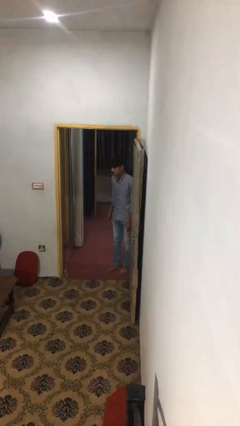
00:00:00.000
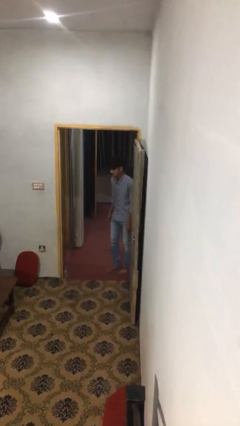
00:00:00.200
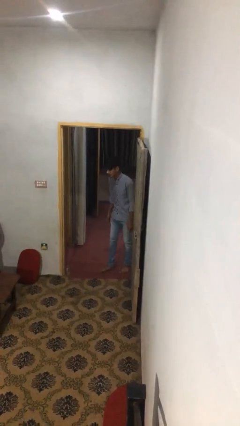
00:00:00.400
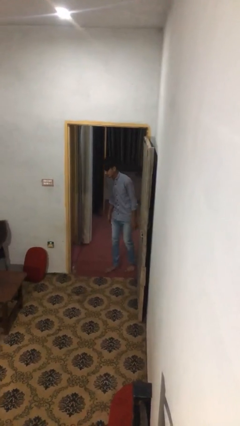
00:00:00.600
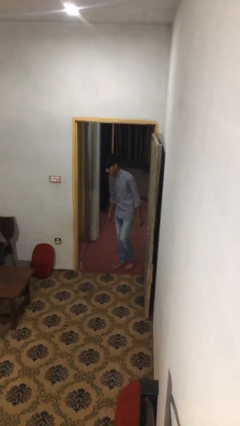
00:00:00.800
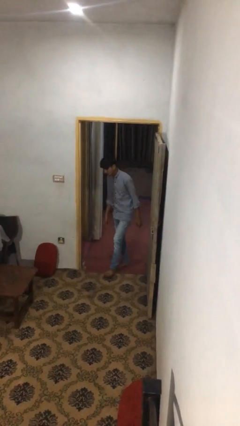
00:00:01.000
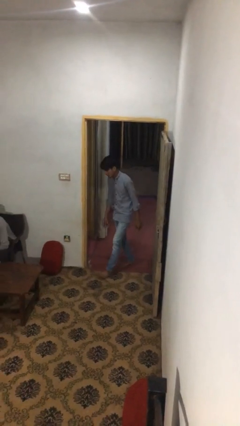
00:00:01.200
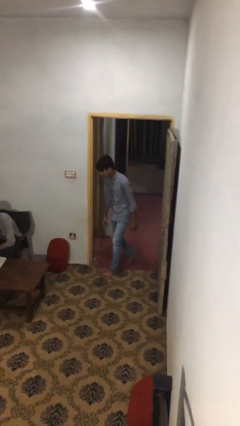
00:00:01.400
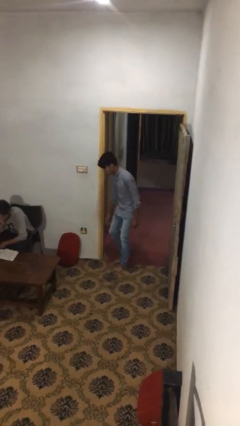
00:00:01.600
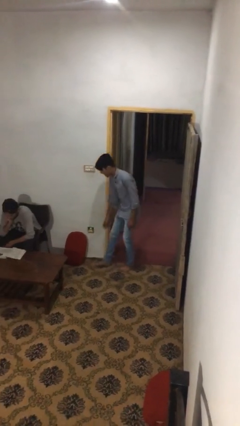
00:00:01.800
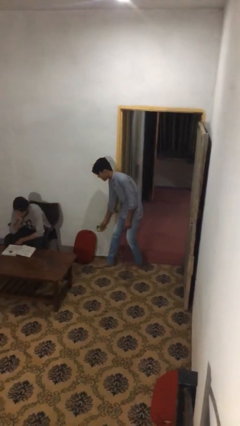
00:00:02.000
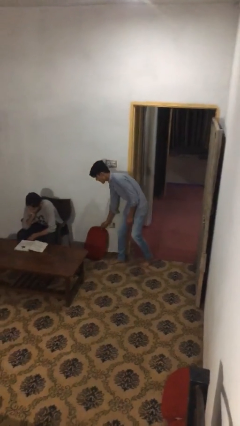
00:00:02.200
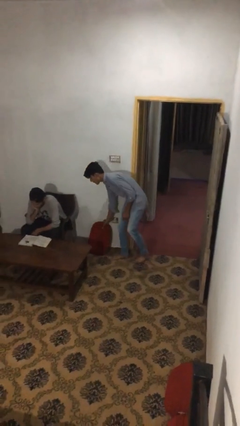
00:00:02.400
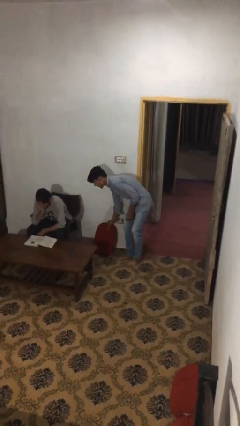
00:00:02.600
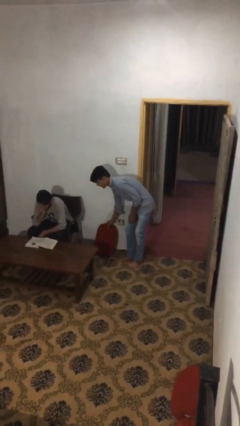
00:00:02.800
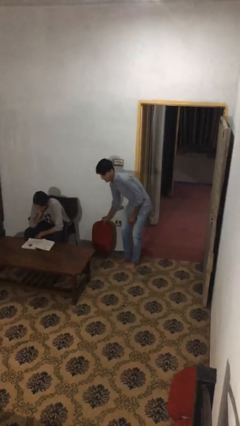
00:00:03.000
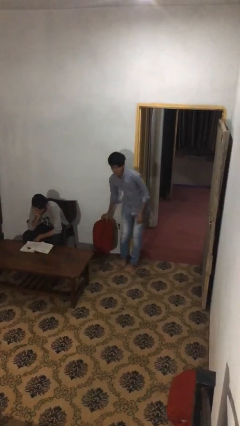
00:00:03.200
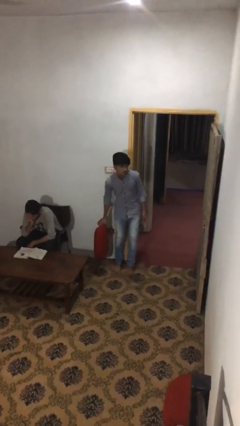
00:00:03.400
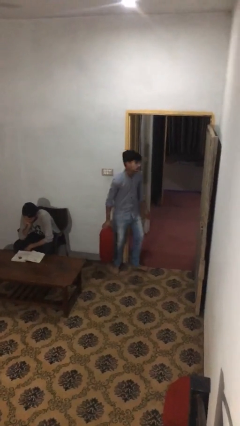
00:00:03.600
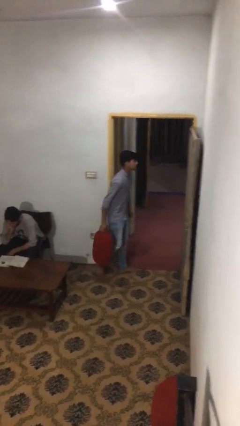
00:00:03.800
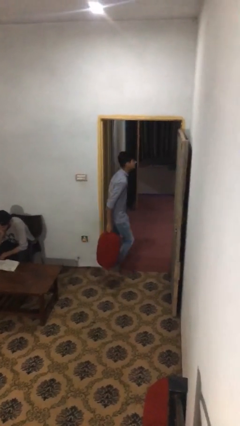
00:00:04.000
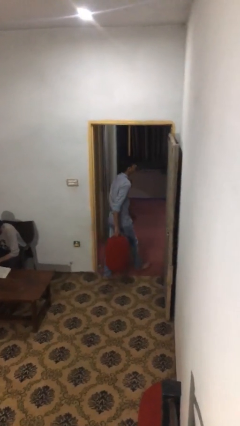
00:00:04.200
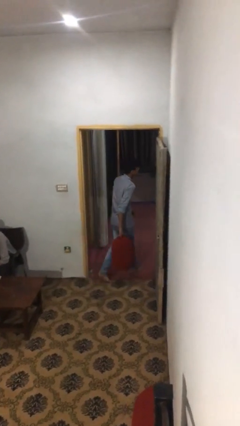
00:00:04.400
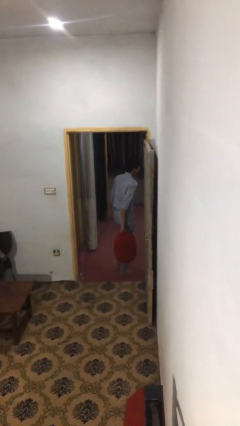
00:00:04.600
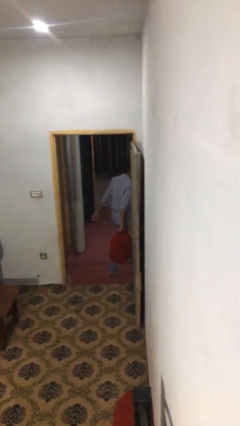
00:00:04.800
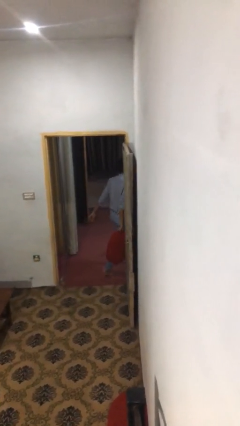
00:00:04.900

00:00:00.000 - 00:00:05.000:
person steals object from person

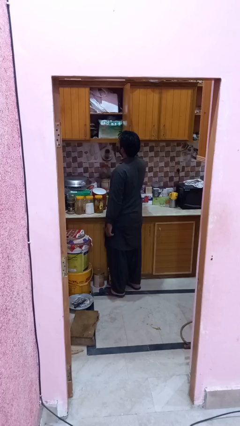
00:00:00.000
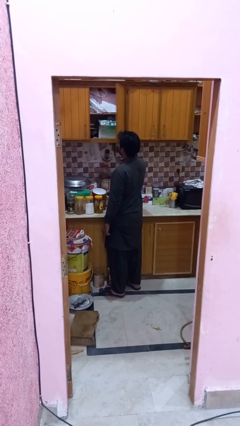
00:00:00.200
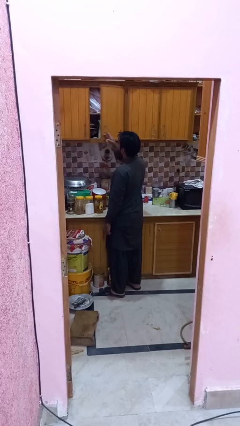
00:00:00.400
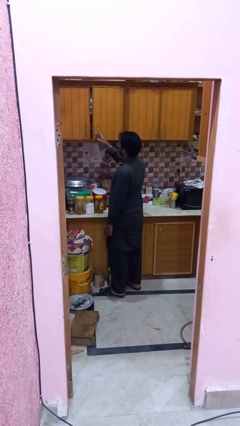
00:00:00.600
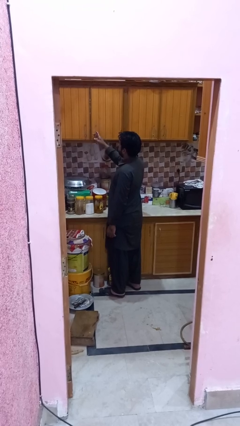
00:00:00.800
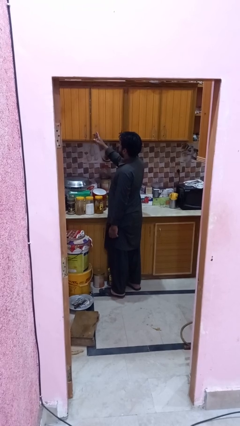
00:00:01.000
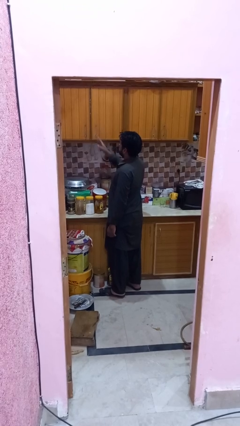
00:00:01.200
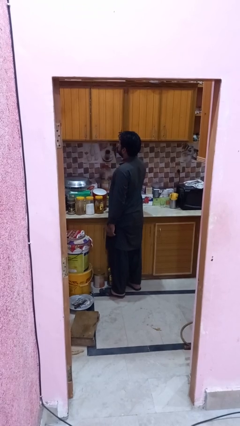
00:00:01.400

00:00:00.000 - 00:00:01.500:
person closes cabinet

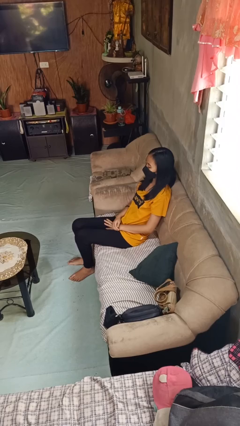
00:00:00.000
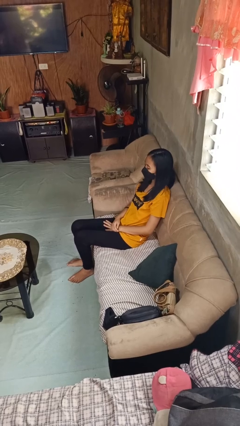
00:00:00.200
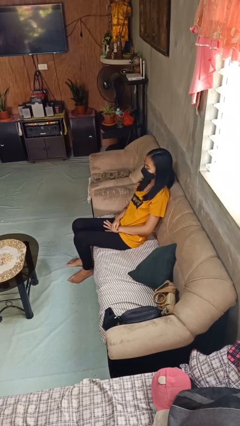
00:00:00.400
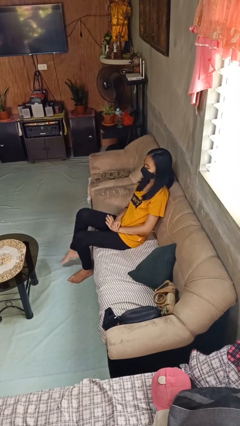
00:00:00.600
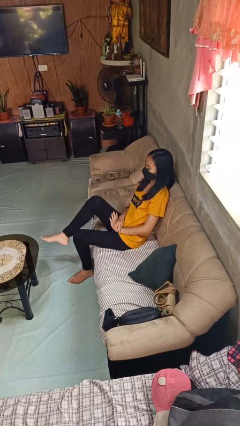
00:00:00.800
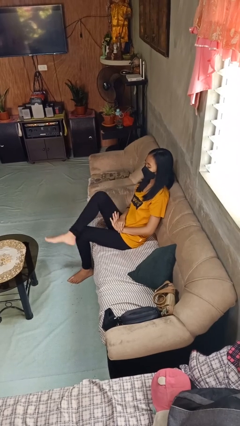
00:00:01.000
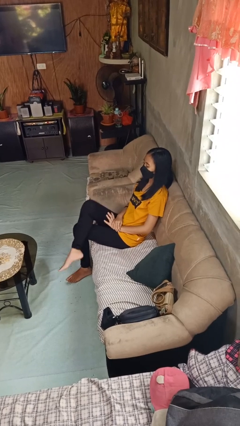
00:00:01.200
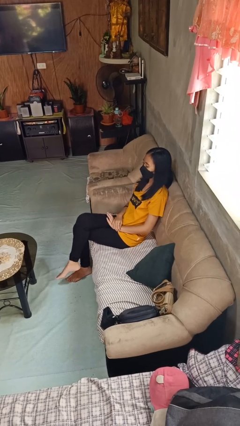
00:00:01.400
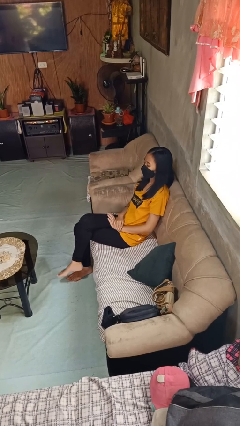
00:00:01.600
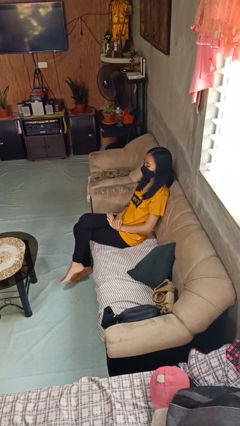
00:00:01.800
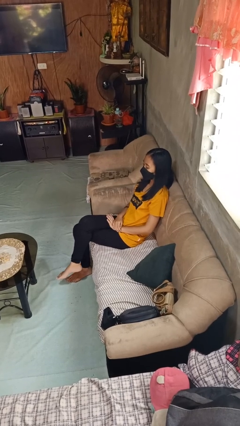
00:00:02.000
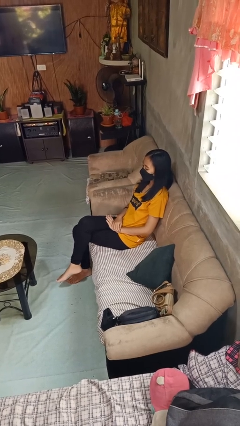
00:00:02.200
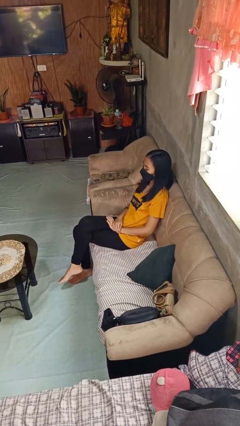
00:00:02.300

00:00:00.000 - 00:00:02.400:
person crosses legs

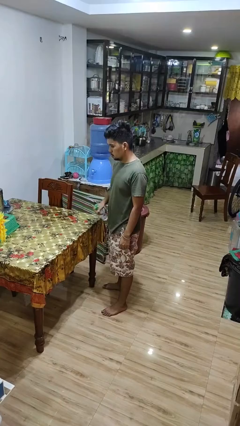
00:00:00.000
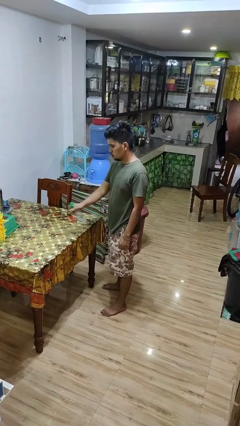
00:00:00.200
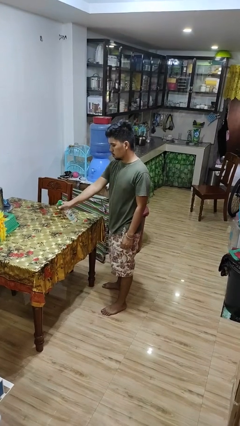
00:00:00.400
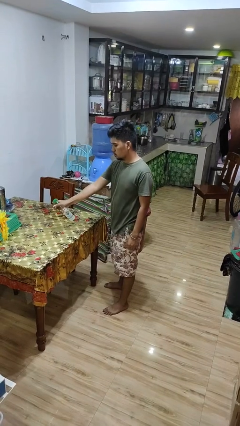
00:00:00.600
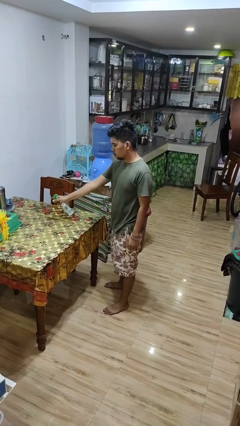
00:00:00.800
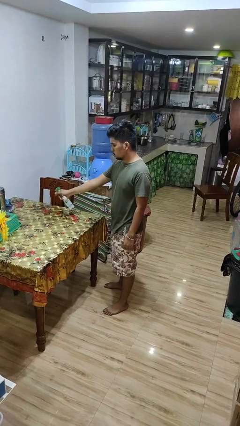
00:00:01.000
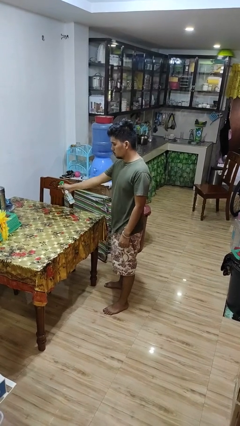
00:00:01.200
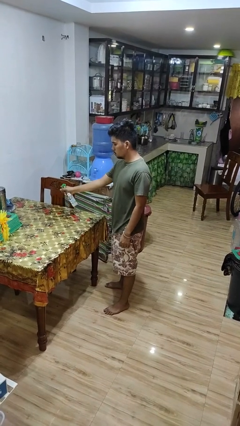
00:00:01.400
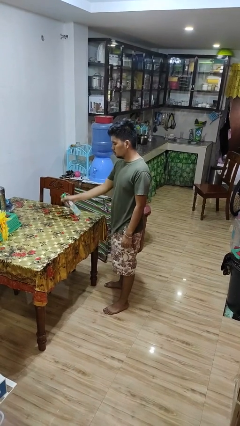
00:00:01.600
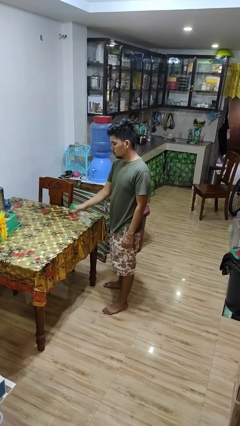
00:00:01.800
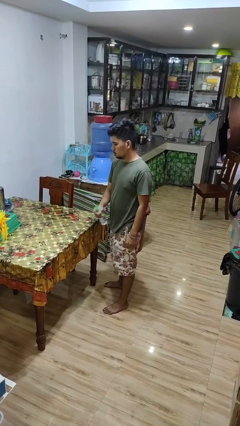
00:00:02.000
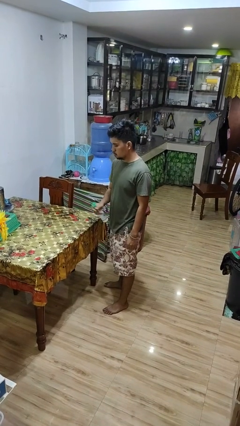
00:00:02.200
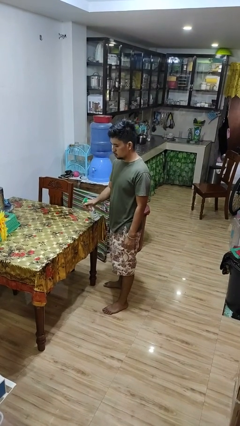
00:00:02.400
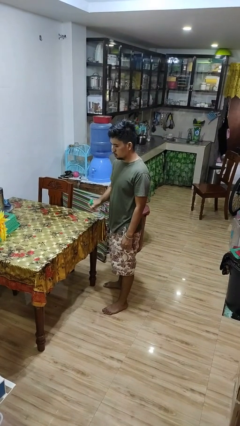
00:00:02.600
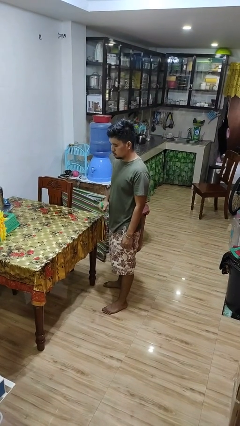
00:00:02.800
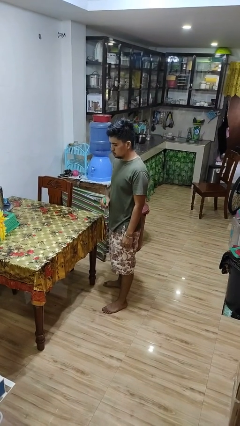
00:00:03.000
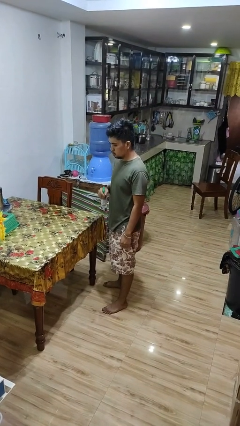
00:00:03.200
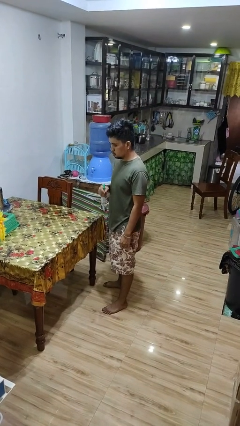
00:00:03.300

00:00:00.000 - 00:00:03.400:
person sprays from bottle

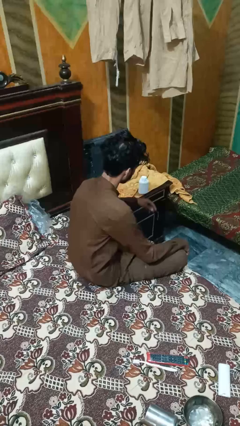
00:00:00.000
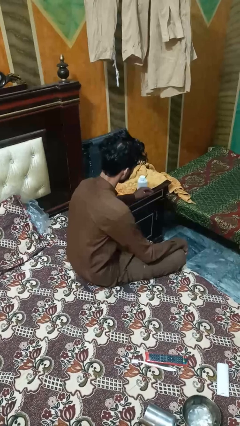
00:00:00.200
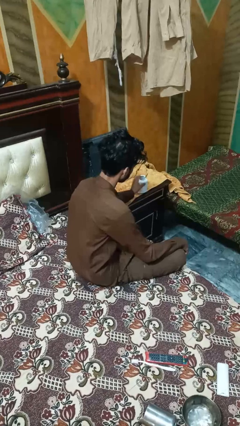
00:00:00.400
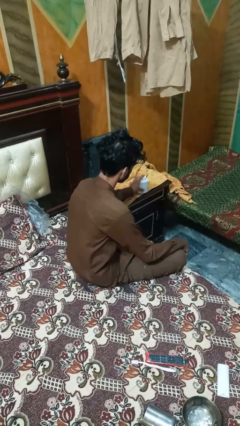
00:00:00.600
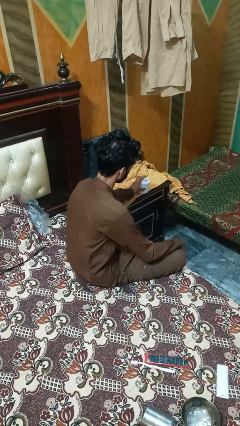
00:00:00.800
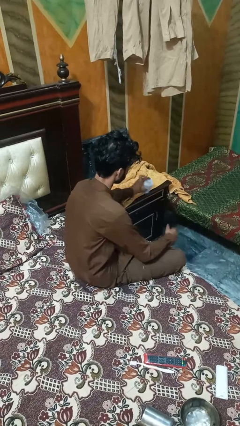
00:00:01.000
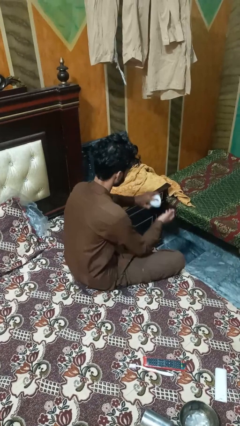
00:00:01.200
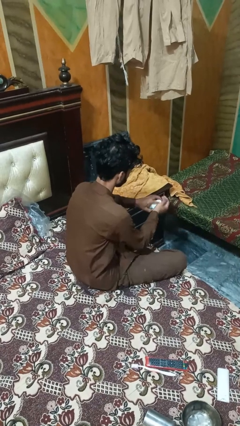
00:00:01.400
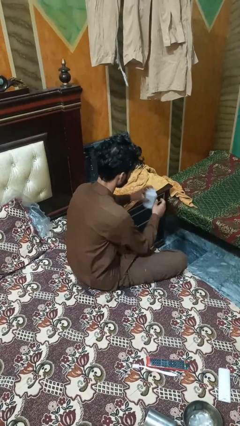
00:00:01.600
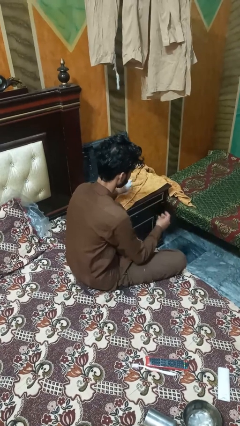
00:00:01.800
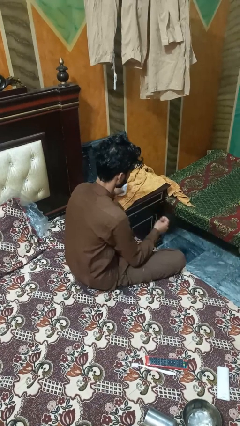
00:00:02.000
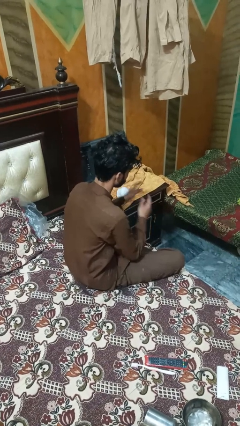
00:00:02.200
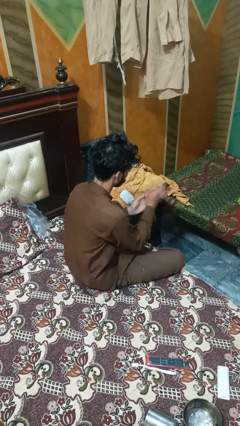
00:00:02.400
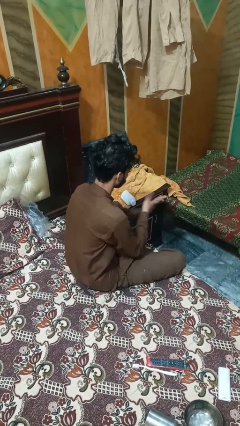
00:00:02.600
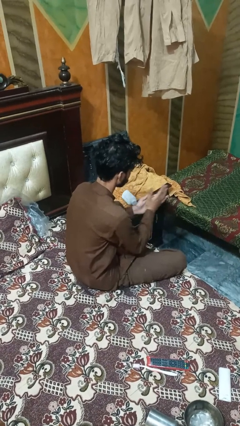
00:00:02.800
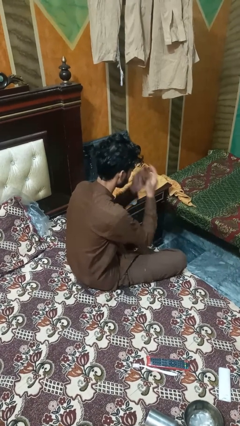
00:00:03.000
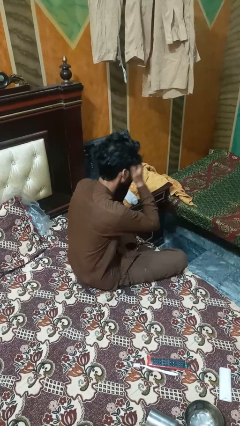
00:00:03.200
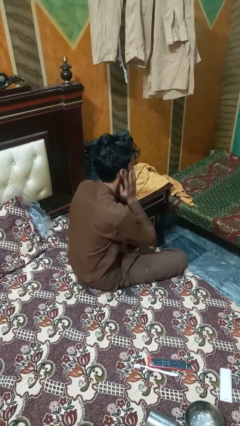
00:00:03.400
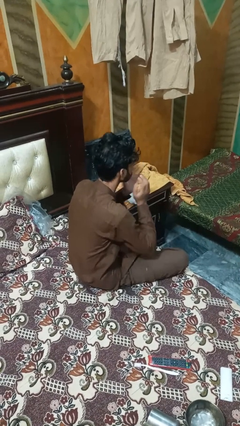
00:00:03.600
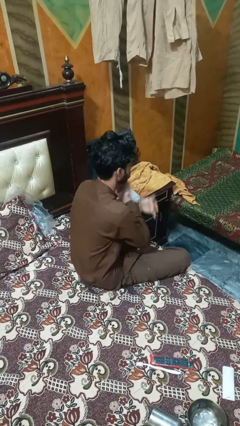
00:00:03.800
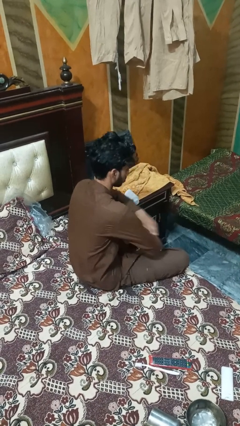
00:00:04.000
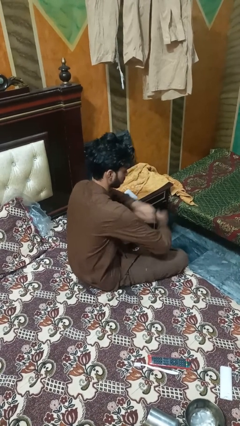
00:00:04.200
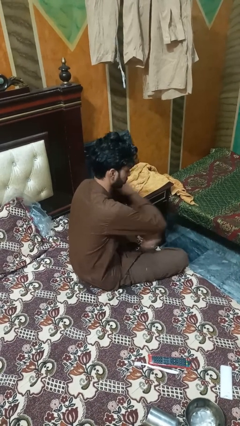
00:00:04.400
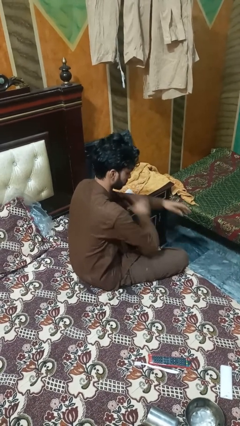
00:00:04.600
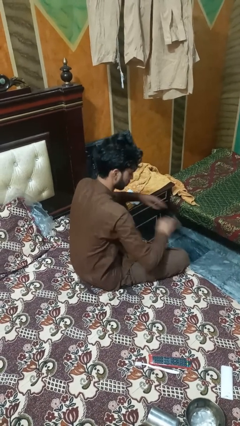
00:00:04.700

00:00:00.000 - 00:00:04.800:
person applies sunscreen

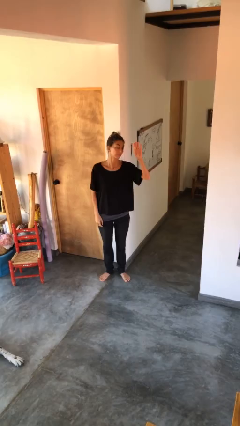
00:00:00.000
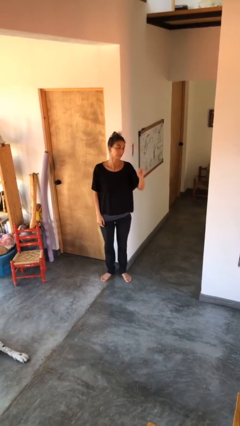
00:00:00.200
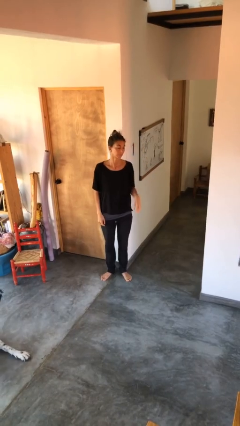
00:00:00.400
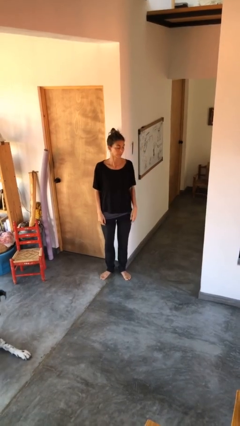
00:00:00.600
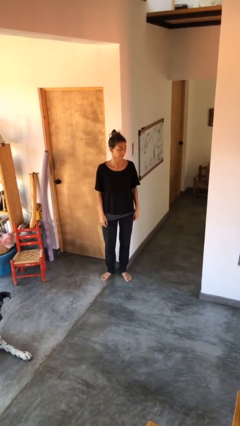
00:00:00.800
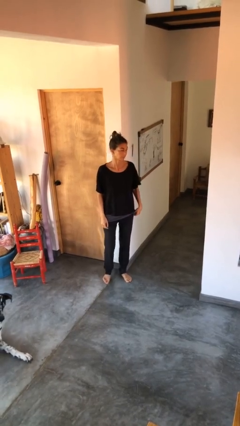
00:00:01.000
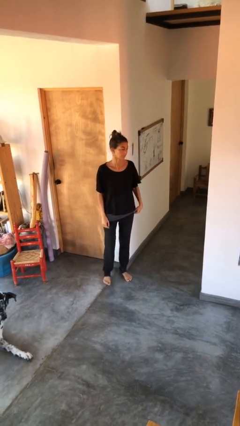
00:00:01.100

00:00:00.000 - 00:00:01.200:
person gestures lower hand
